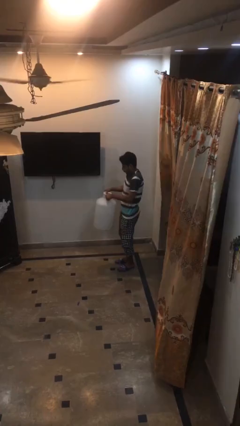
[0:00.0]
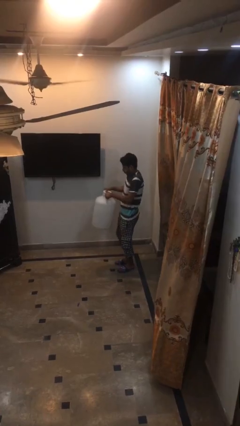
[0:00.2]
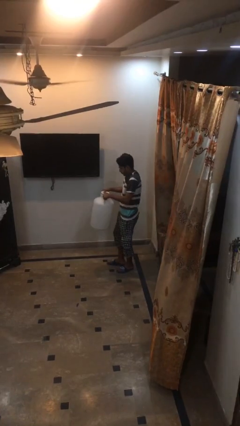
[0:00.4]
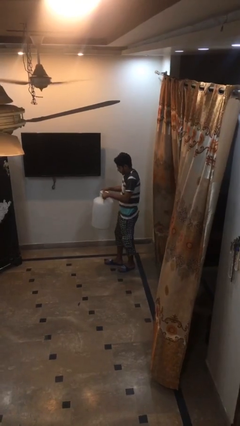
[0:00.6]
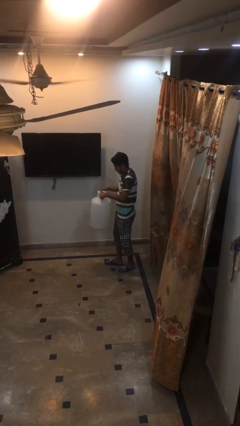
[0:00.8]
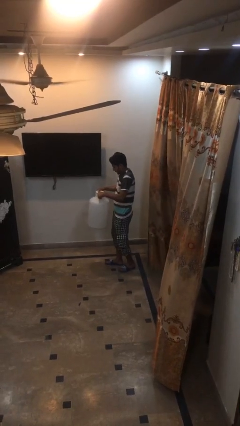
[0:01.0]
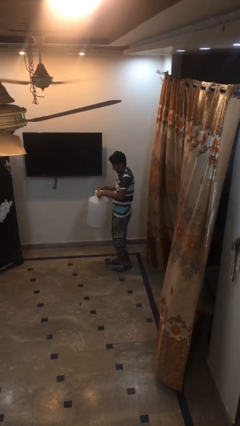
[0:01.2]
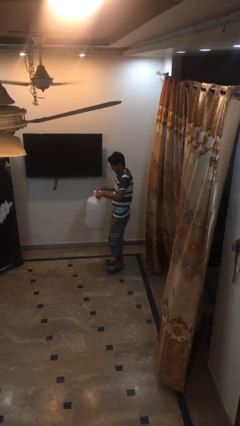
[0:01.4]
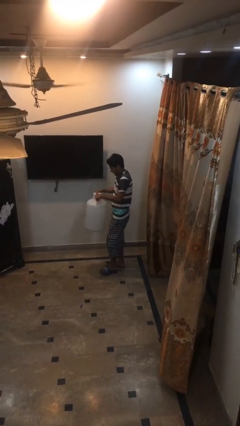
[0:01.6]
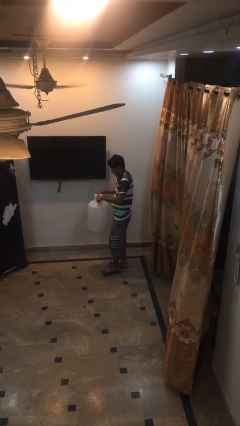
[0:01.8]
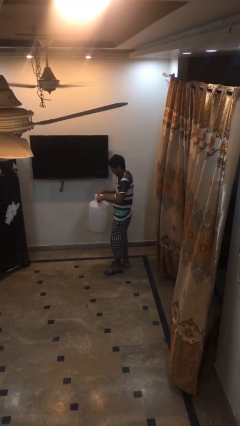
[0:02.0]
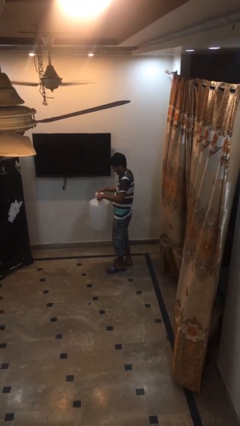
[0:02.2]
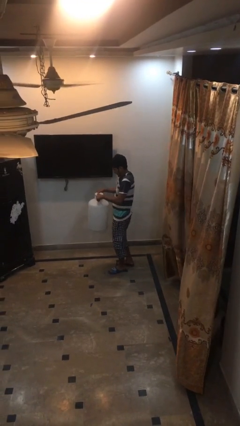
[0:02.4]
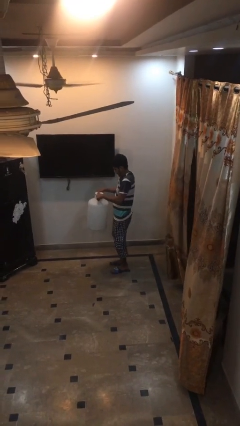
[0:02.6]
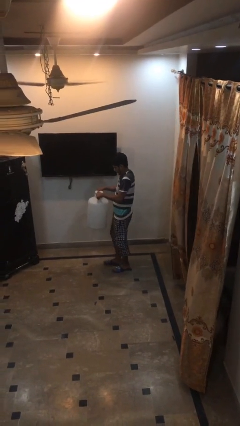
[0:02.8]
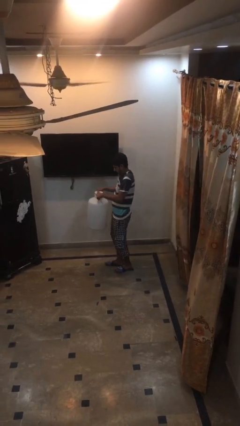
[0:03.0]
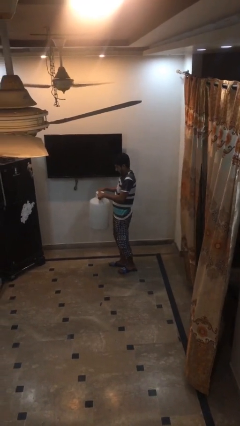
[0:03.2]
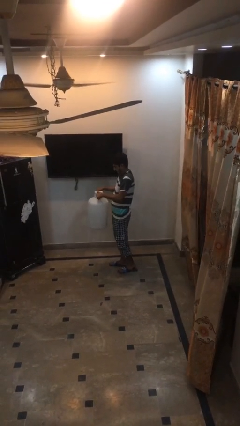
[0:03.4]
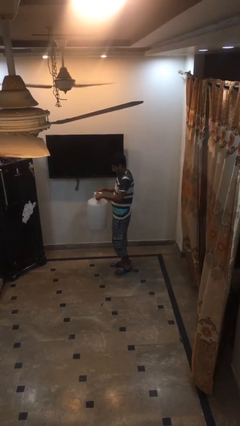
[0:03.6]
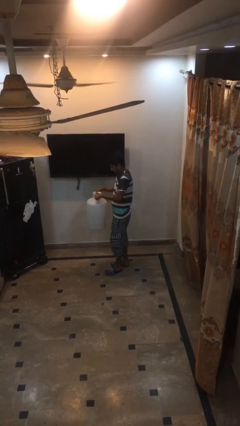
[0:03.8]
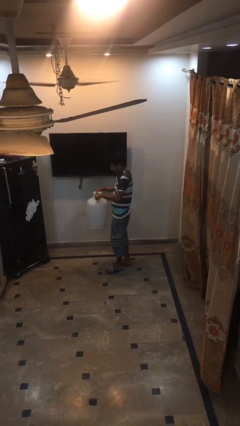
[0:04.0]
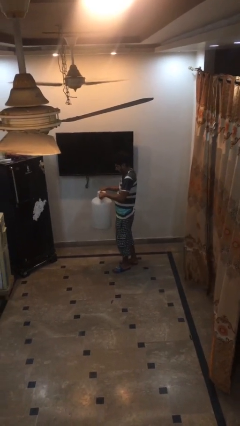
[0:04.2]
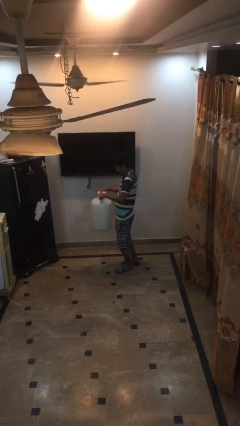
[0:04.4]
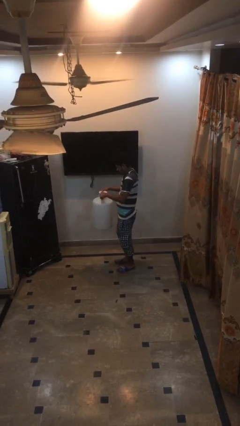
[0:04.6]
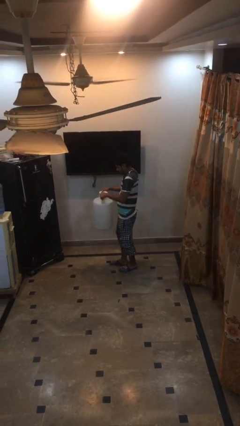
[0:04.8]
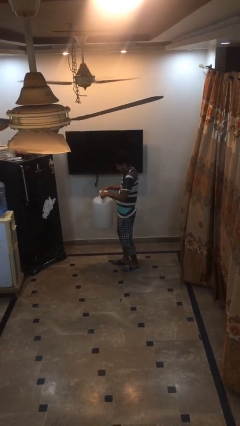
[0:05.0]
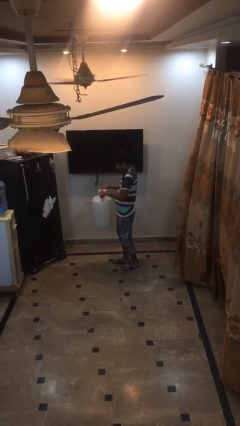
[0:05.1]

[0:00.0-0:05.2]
person carries heavy object

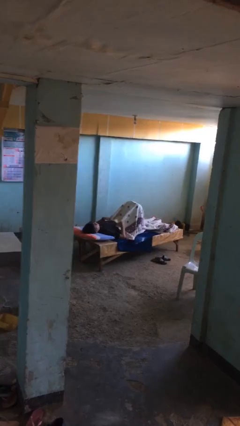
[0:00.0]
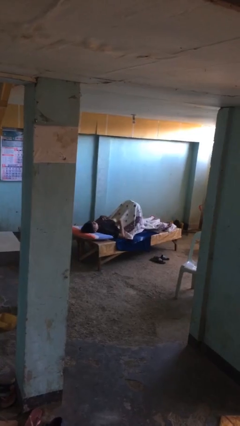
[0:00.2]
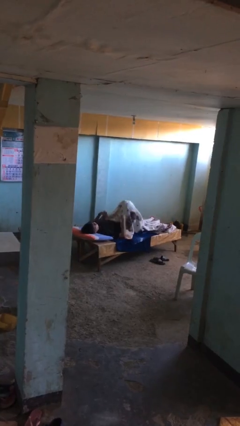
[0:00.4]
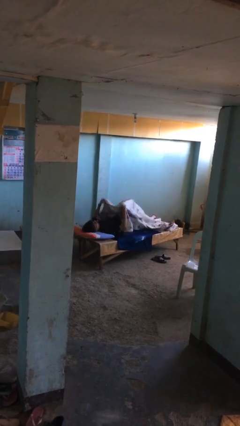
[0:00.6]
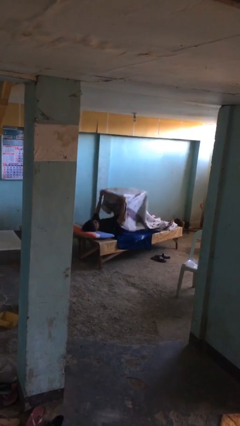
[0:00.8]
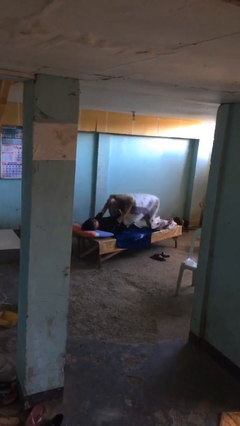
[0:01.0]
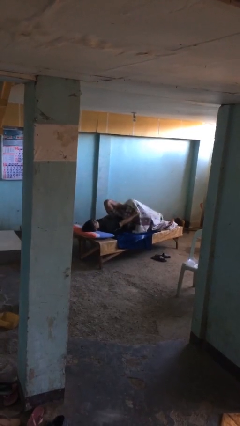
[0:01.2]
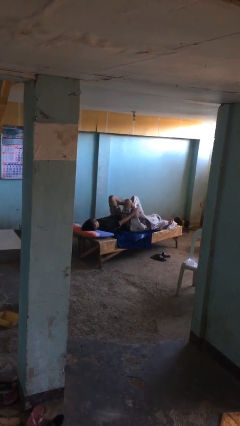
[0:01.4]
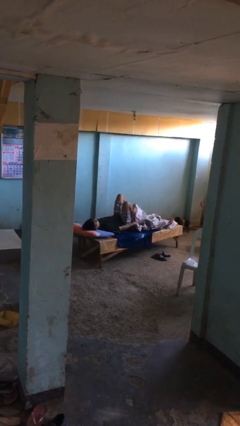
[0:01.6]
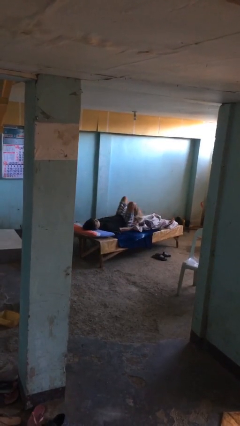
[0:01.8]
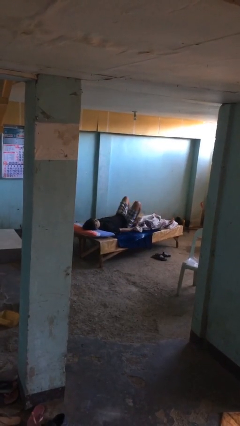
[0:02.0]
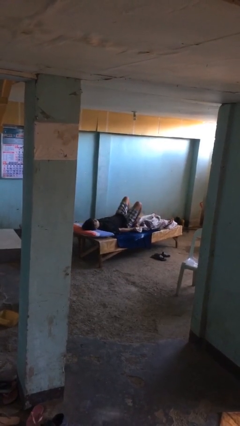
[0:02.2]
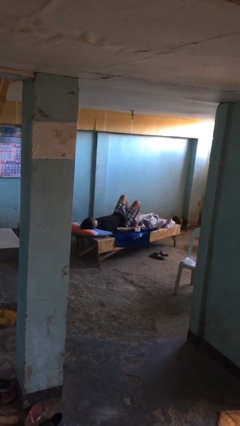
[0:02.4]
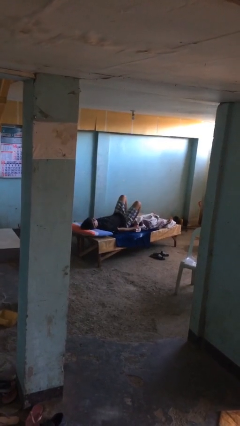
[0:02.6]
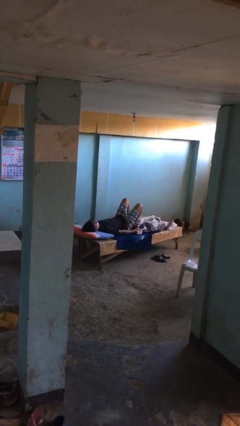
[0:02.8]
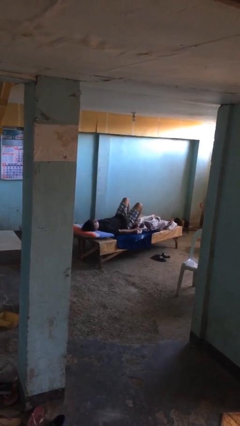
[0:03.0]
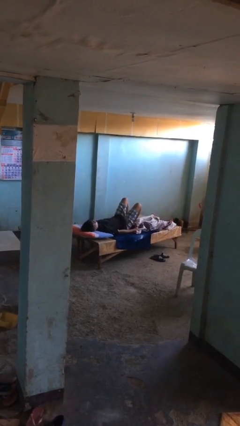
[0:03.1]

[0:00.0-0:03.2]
person uncovers with bedsheets

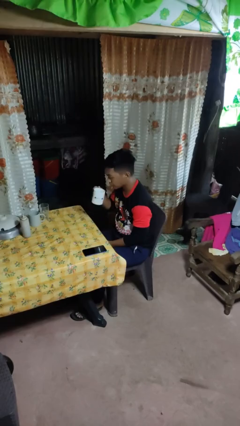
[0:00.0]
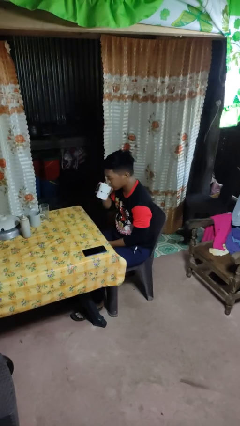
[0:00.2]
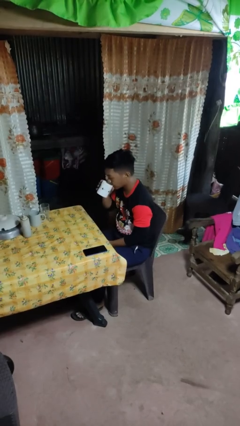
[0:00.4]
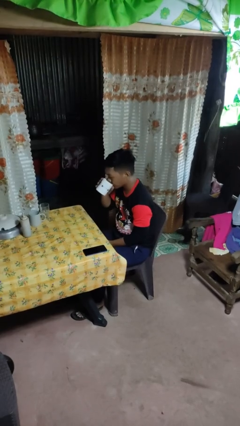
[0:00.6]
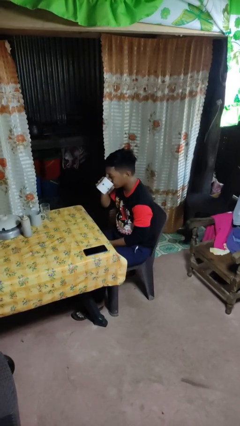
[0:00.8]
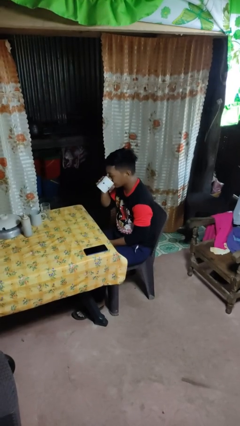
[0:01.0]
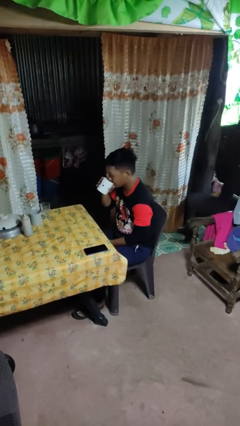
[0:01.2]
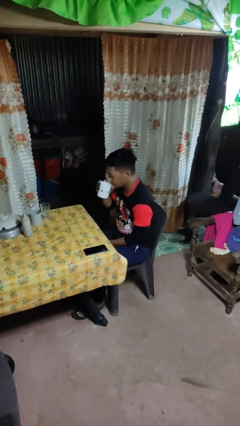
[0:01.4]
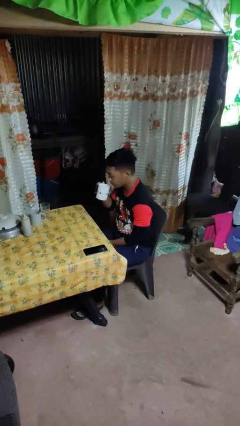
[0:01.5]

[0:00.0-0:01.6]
person drinks from mug

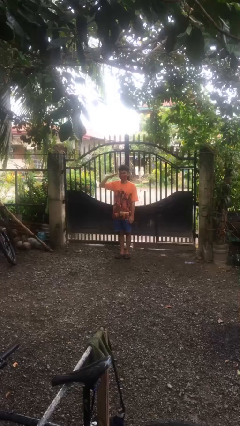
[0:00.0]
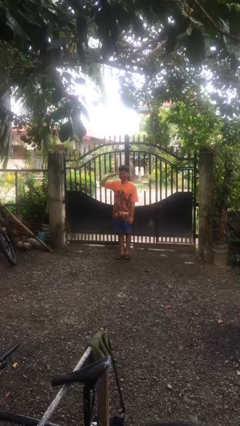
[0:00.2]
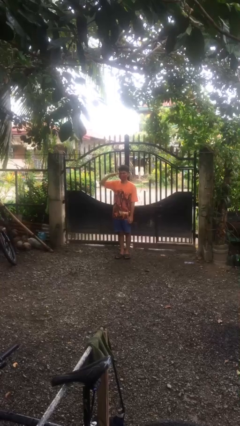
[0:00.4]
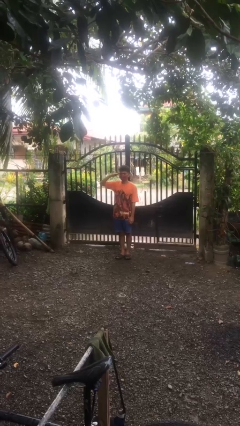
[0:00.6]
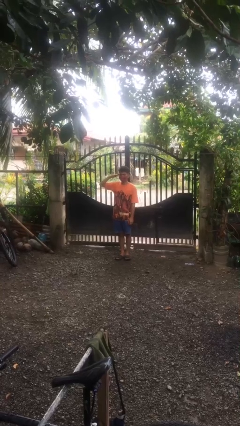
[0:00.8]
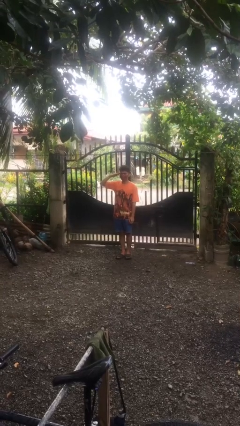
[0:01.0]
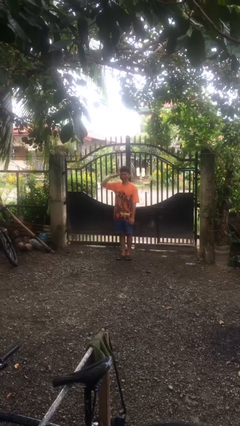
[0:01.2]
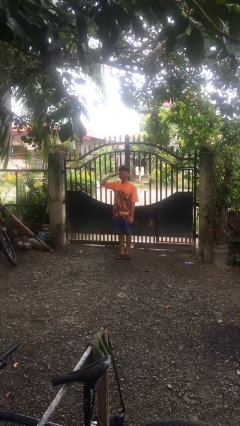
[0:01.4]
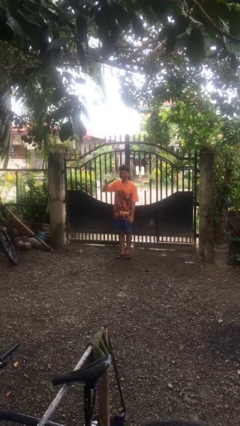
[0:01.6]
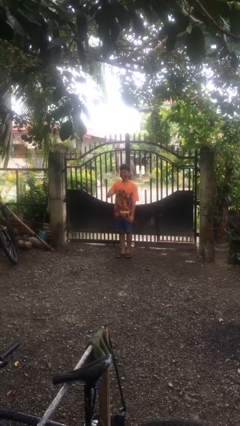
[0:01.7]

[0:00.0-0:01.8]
person salutes

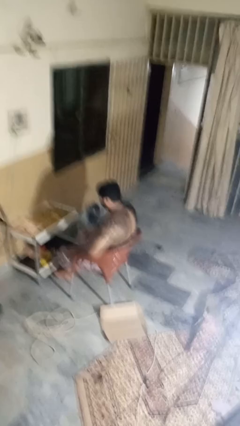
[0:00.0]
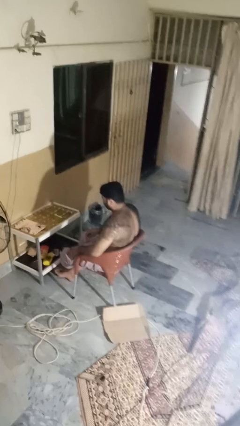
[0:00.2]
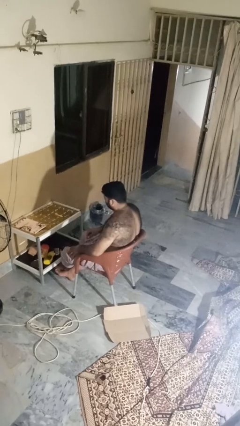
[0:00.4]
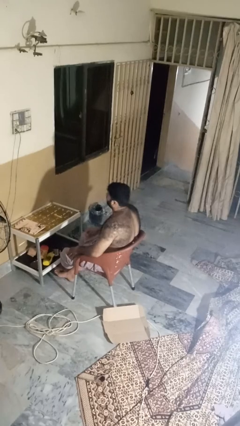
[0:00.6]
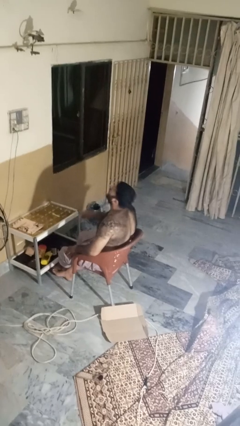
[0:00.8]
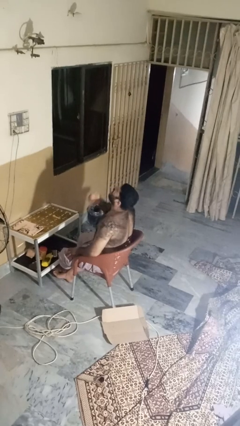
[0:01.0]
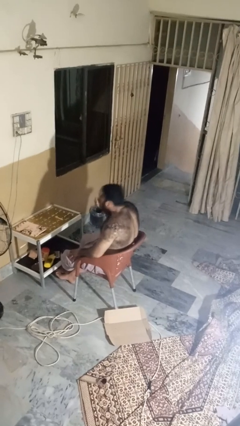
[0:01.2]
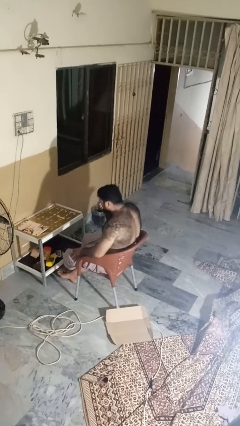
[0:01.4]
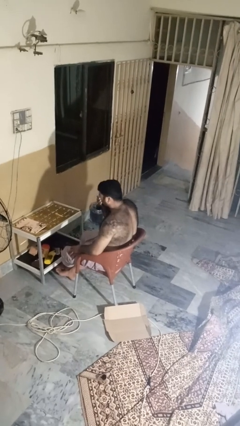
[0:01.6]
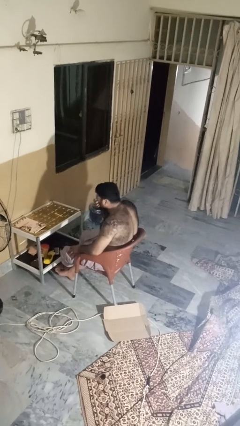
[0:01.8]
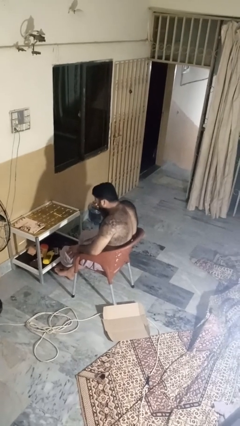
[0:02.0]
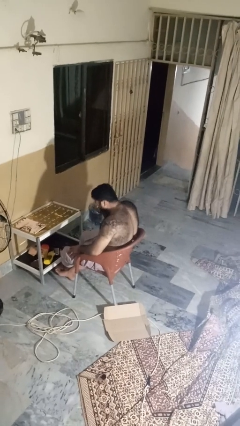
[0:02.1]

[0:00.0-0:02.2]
person sneezes into hand

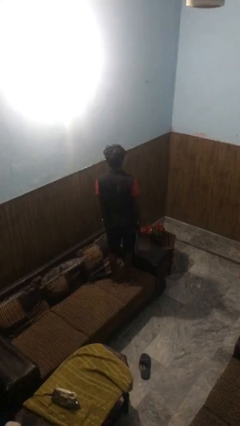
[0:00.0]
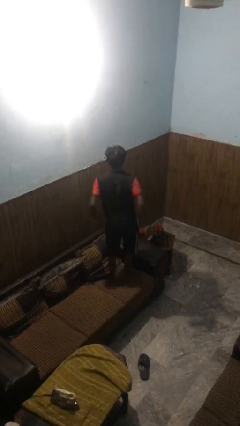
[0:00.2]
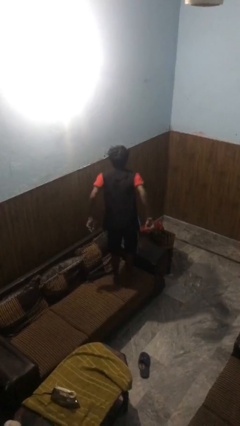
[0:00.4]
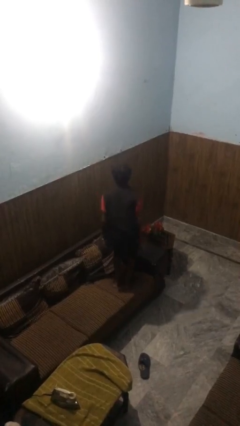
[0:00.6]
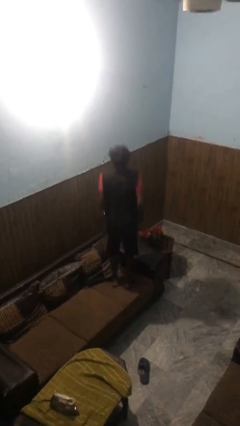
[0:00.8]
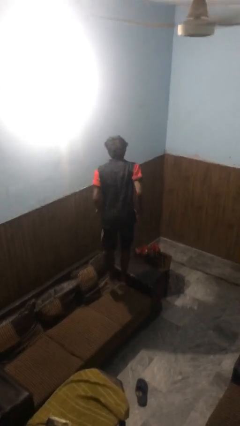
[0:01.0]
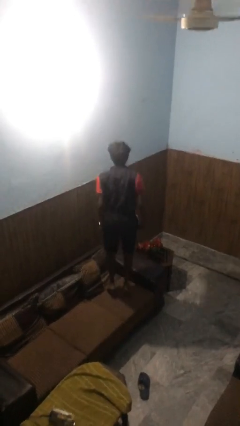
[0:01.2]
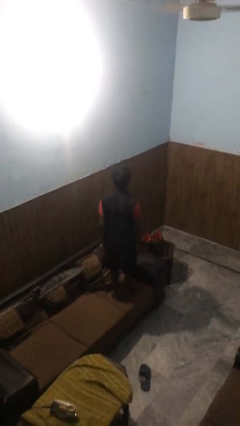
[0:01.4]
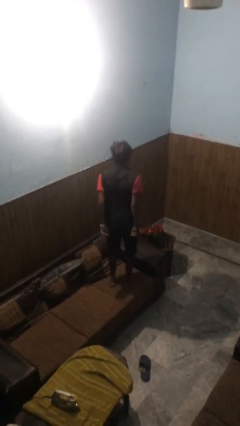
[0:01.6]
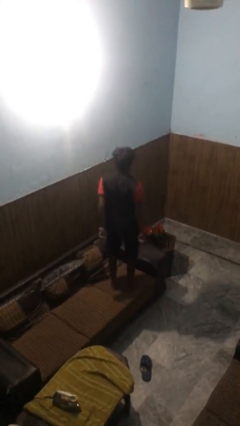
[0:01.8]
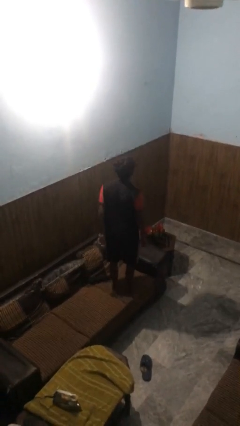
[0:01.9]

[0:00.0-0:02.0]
person jumps on couch

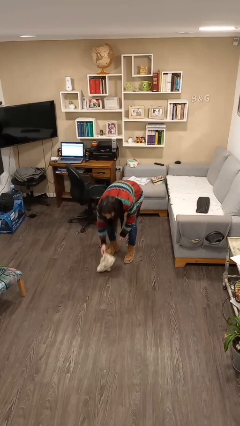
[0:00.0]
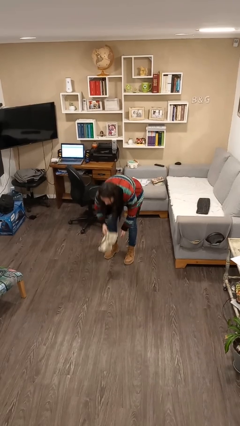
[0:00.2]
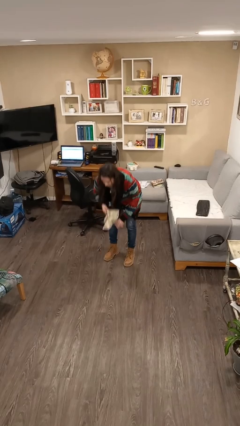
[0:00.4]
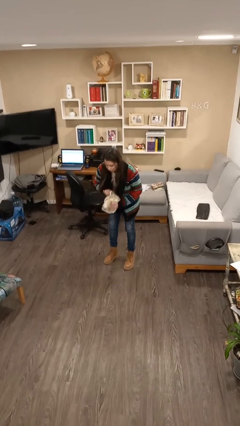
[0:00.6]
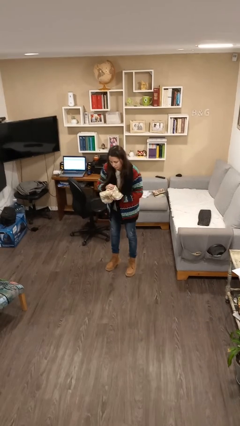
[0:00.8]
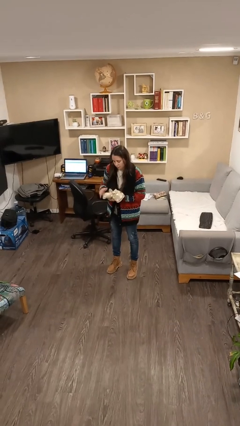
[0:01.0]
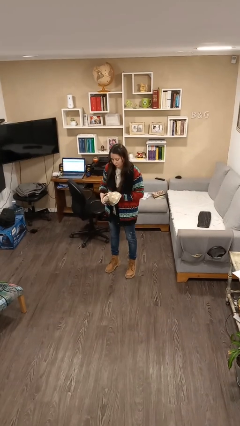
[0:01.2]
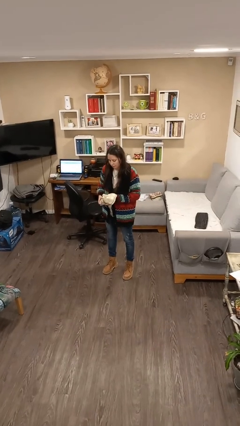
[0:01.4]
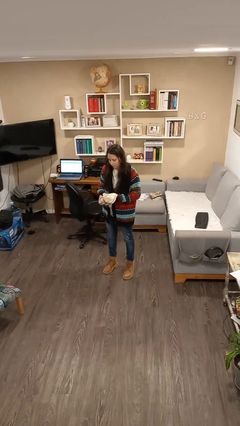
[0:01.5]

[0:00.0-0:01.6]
person picks up object from floor
